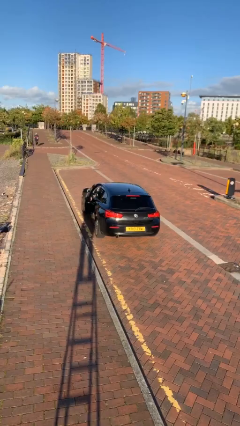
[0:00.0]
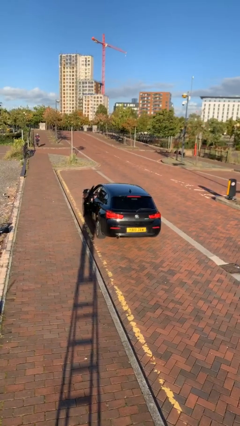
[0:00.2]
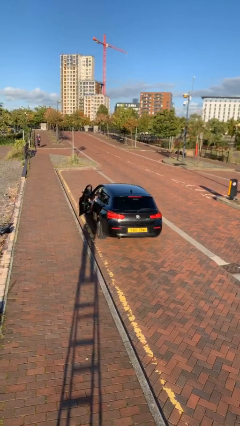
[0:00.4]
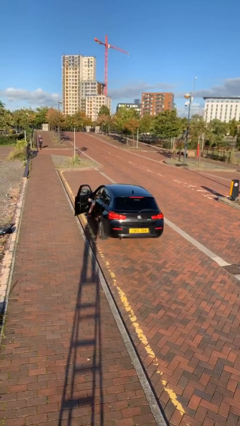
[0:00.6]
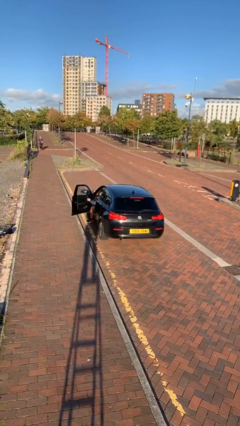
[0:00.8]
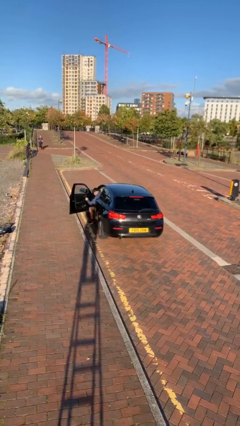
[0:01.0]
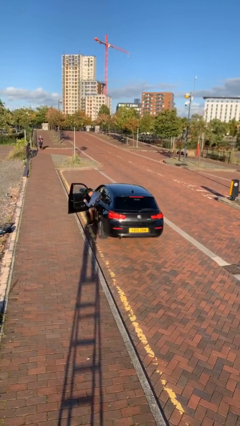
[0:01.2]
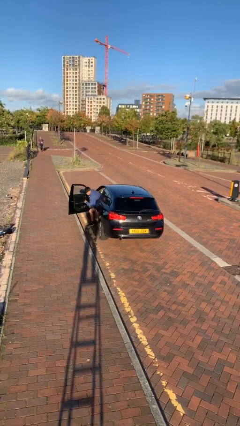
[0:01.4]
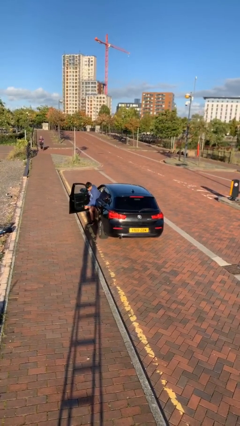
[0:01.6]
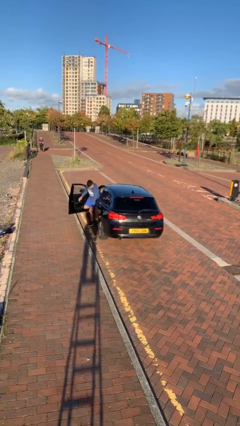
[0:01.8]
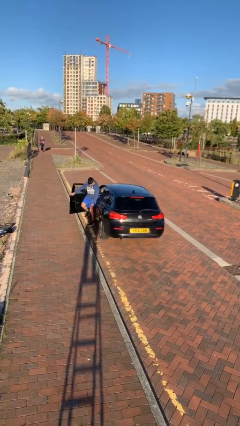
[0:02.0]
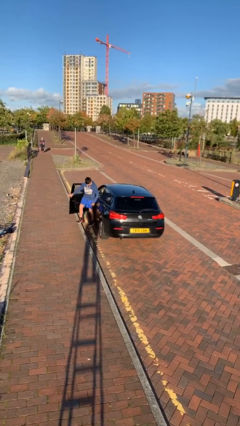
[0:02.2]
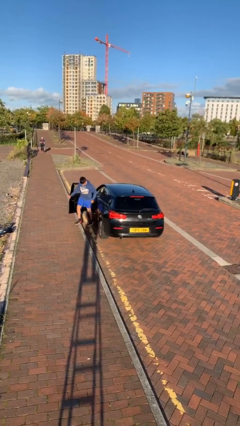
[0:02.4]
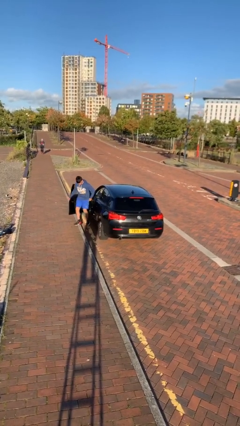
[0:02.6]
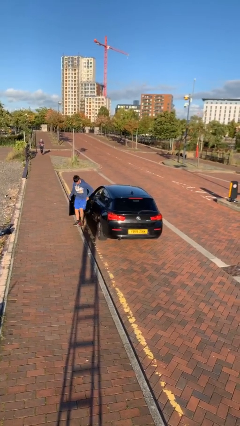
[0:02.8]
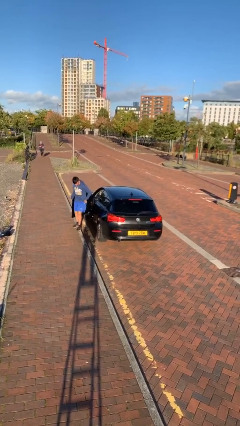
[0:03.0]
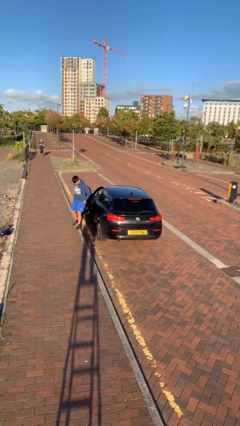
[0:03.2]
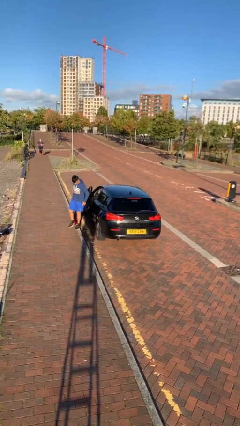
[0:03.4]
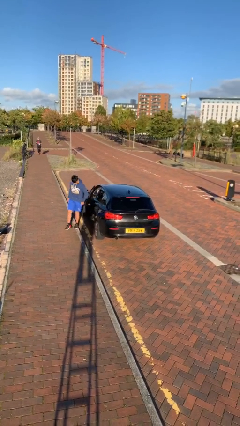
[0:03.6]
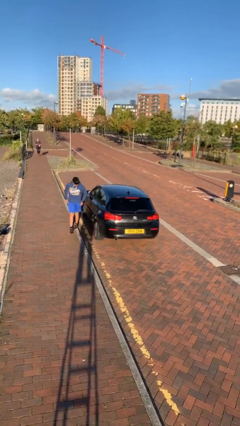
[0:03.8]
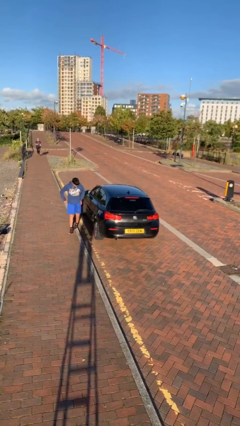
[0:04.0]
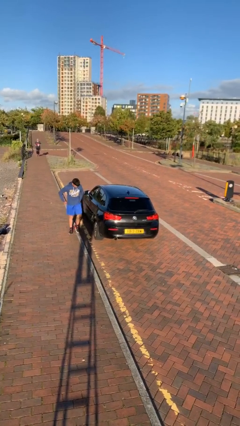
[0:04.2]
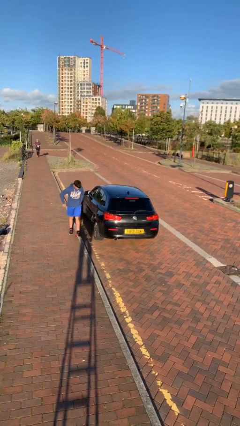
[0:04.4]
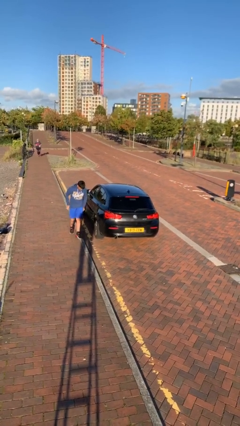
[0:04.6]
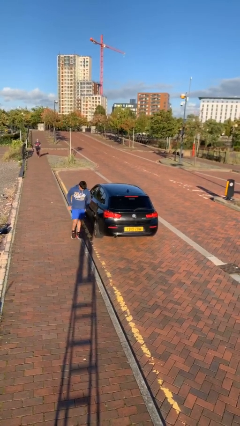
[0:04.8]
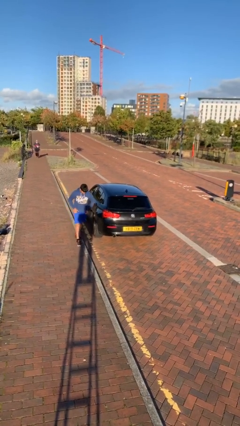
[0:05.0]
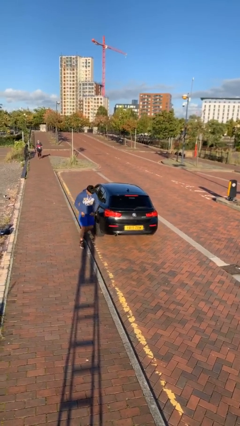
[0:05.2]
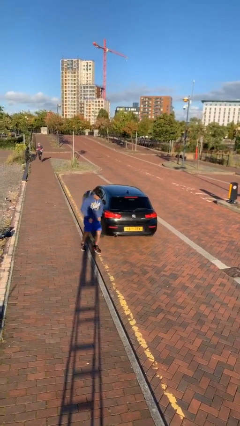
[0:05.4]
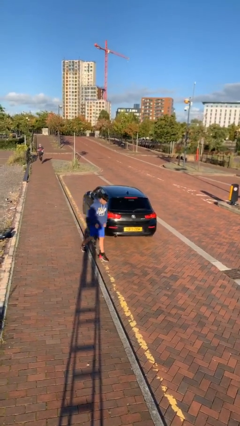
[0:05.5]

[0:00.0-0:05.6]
car drops off person

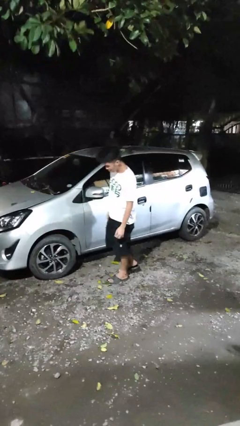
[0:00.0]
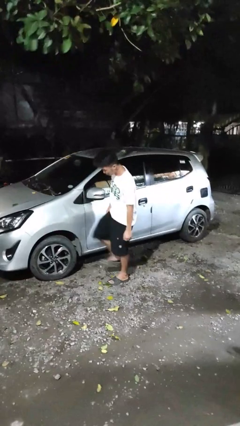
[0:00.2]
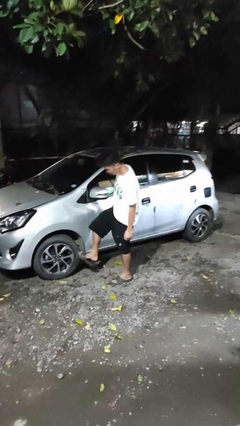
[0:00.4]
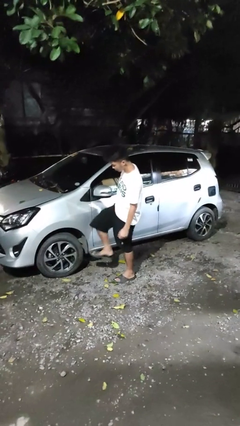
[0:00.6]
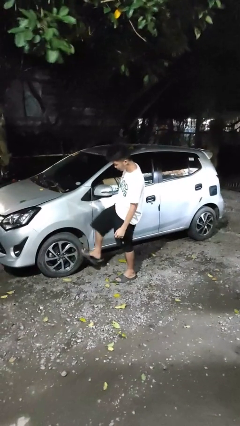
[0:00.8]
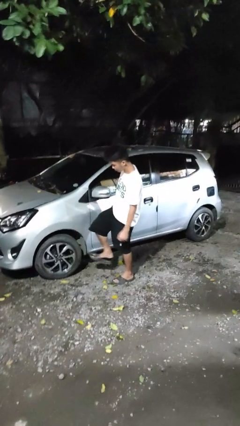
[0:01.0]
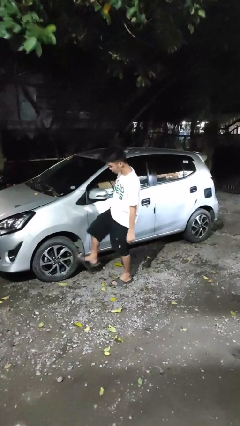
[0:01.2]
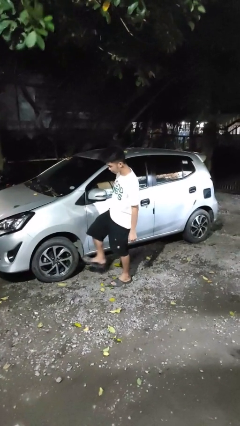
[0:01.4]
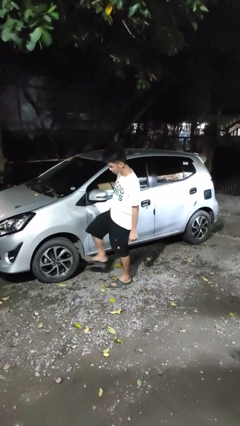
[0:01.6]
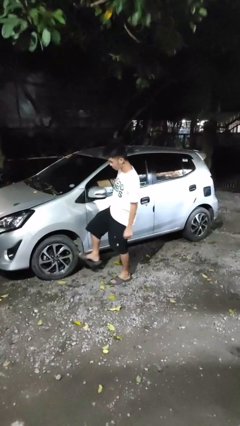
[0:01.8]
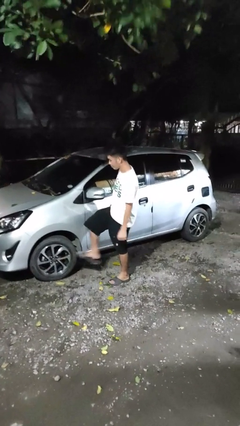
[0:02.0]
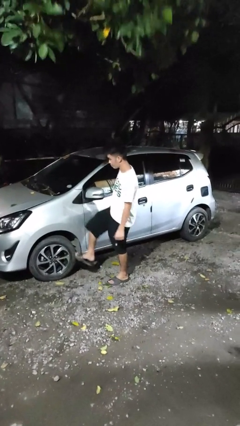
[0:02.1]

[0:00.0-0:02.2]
person kicks car tires

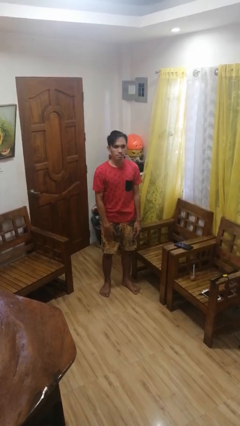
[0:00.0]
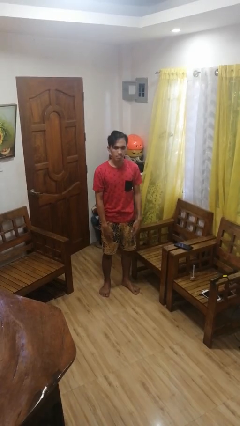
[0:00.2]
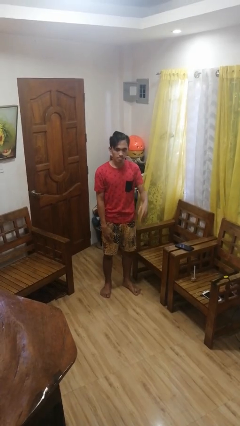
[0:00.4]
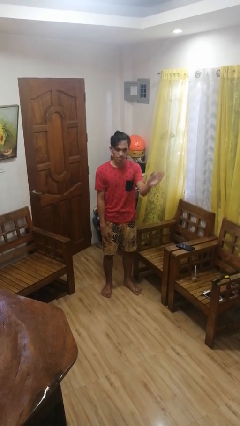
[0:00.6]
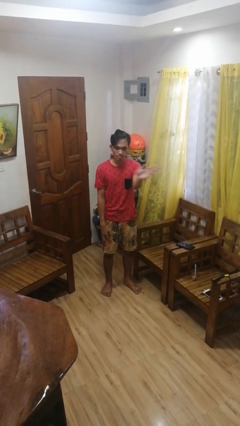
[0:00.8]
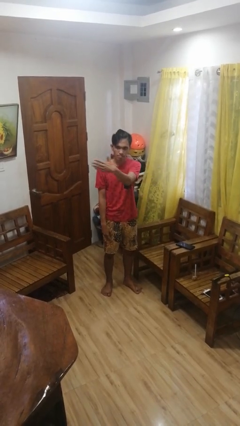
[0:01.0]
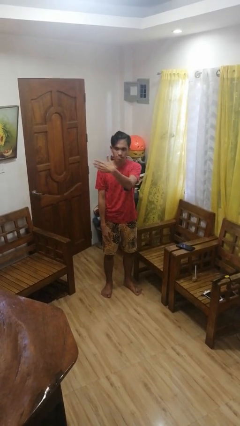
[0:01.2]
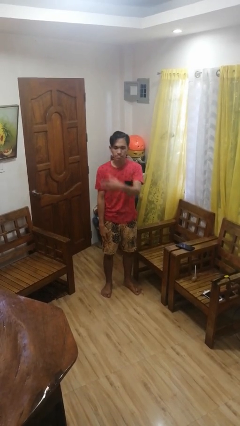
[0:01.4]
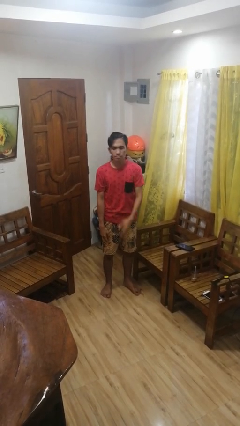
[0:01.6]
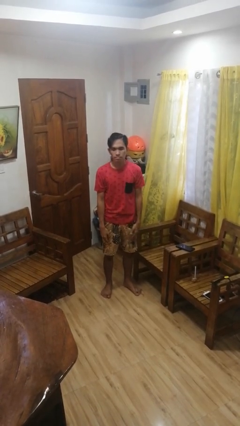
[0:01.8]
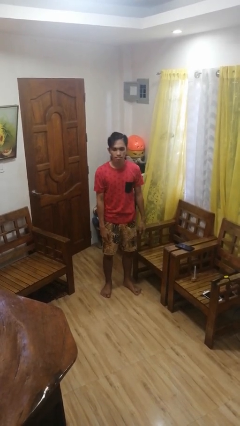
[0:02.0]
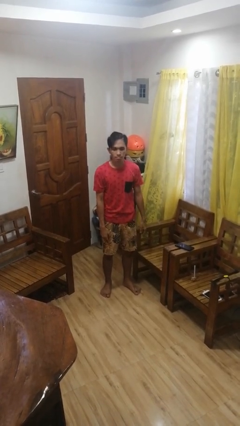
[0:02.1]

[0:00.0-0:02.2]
person gestures swipe right

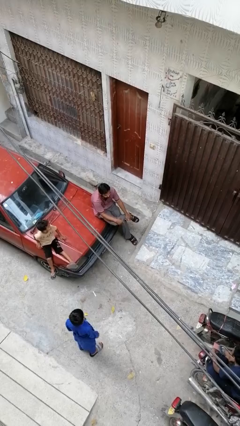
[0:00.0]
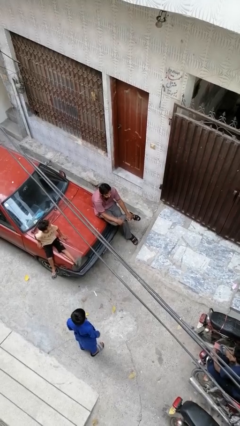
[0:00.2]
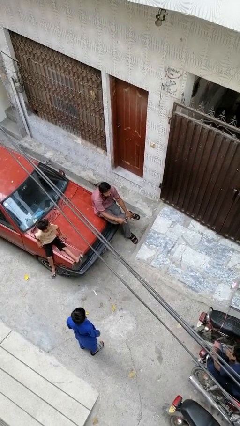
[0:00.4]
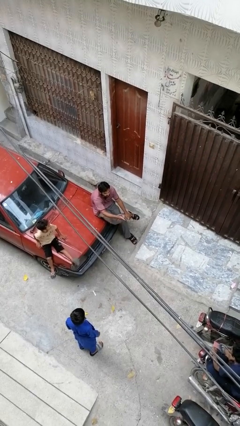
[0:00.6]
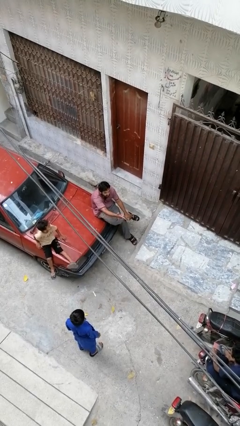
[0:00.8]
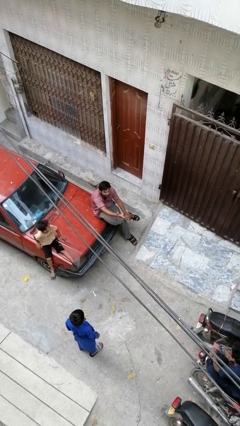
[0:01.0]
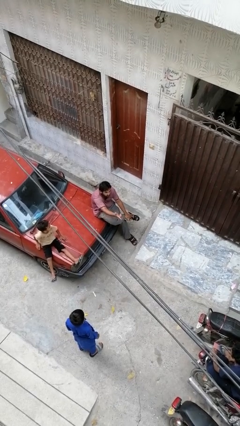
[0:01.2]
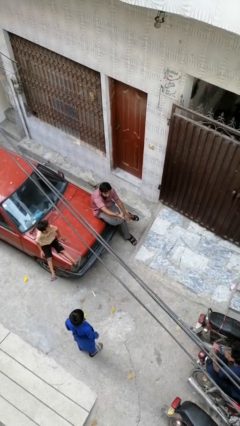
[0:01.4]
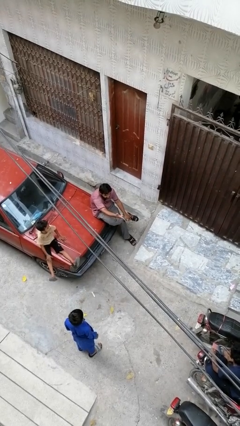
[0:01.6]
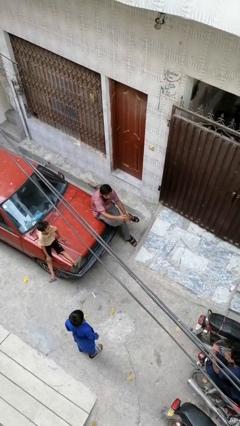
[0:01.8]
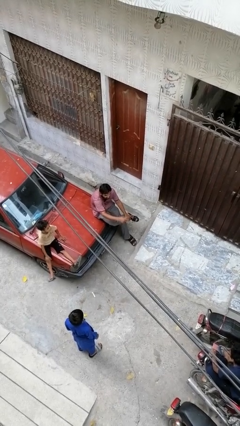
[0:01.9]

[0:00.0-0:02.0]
person points at person

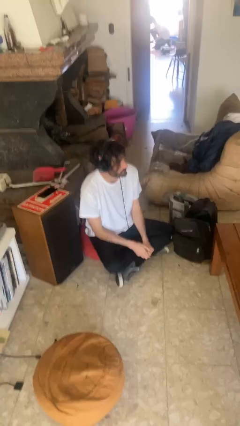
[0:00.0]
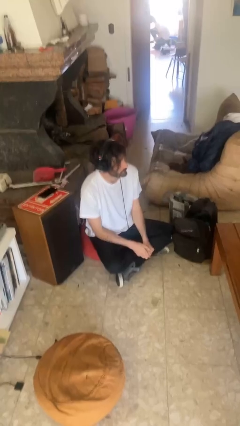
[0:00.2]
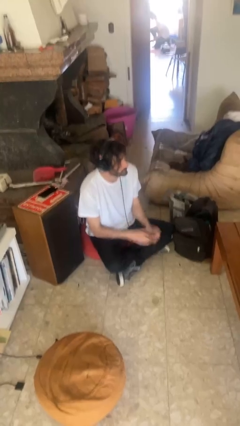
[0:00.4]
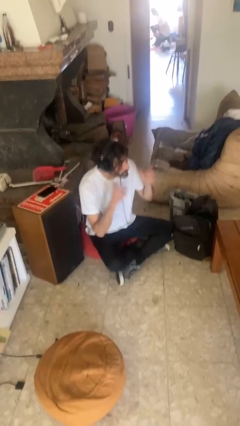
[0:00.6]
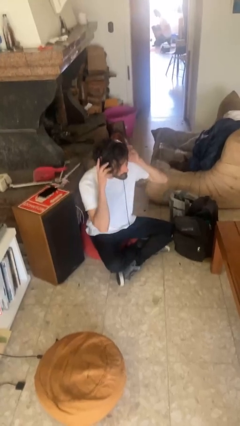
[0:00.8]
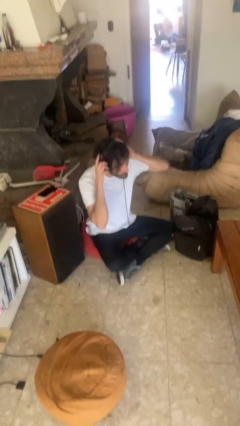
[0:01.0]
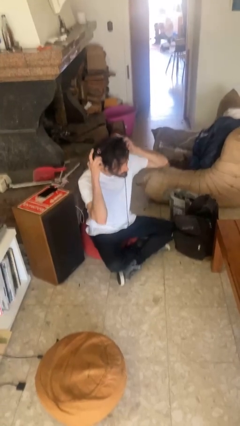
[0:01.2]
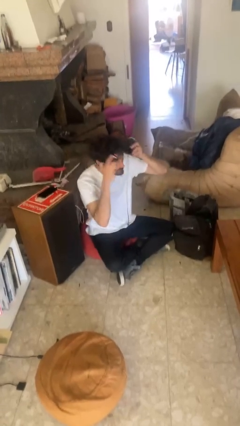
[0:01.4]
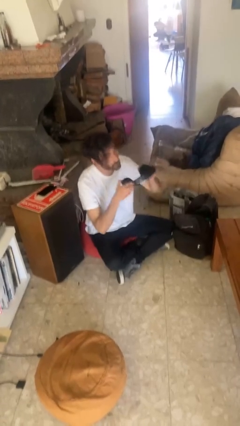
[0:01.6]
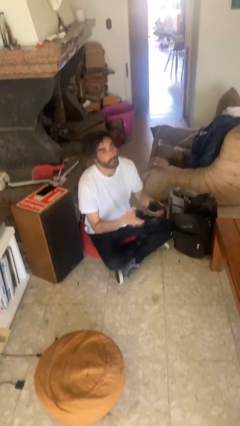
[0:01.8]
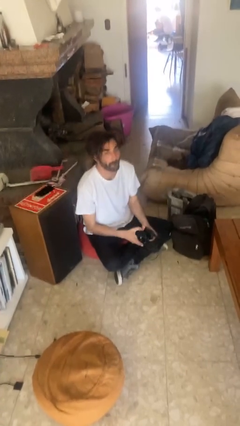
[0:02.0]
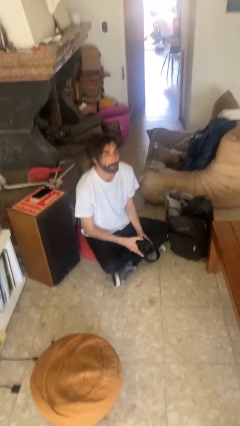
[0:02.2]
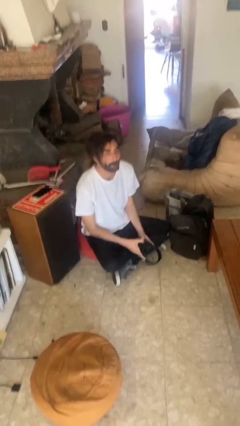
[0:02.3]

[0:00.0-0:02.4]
person takes off headphones

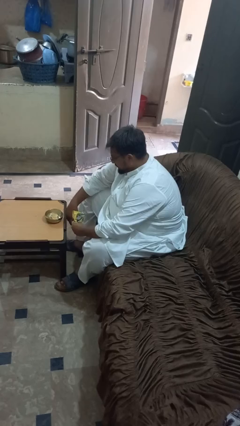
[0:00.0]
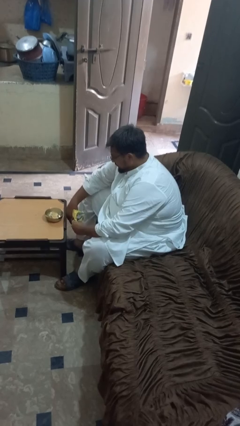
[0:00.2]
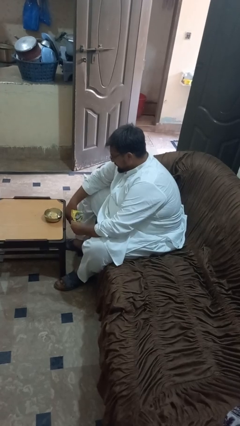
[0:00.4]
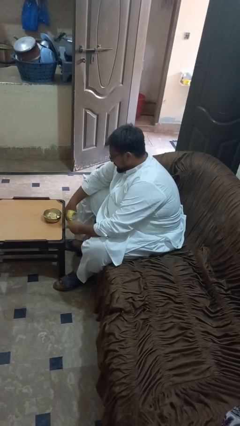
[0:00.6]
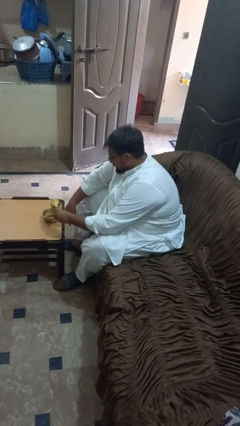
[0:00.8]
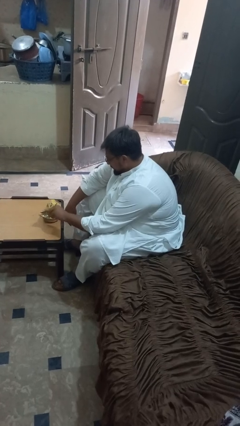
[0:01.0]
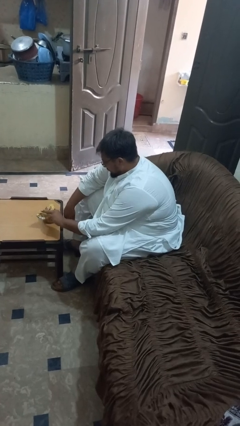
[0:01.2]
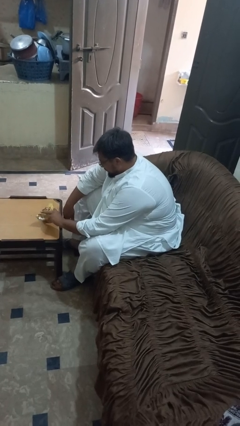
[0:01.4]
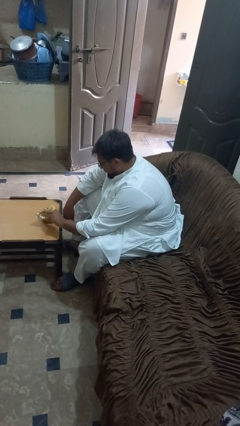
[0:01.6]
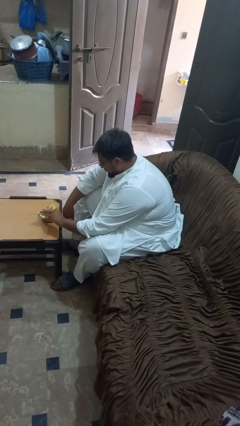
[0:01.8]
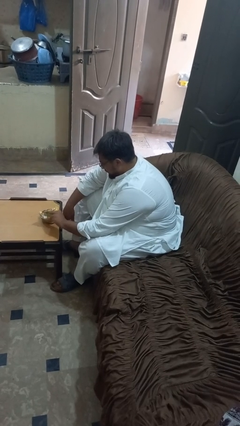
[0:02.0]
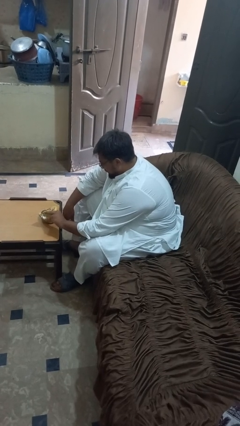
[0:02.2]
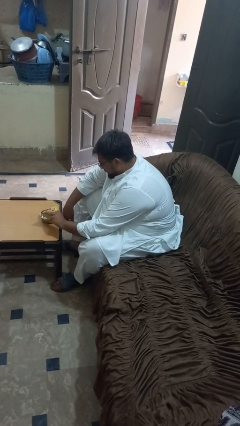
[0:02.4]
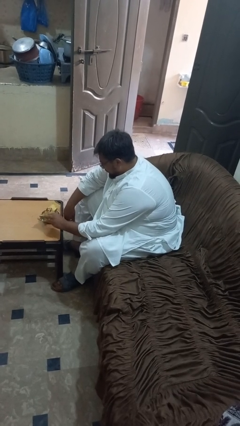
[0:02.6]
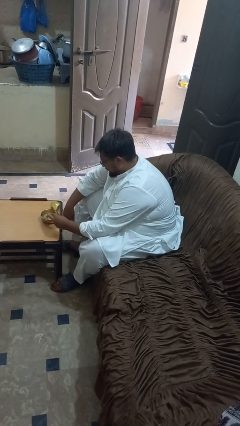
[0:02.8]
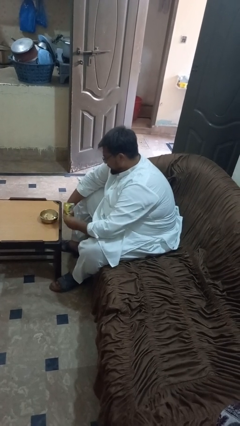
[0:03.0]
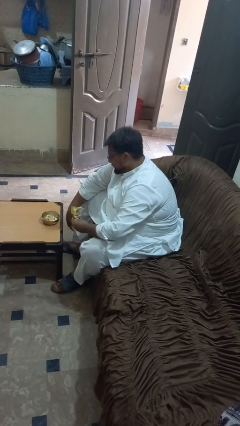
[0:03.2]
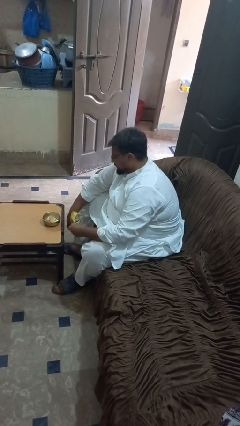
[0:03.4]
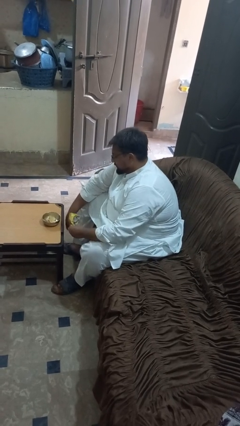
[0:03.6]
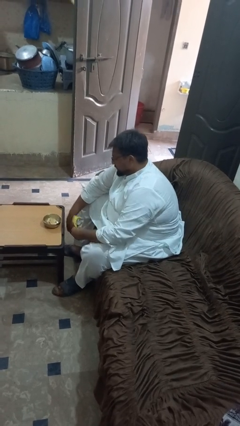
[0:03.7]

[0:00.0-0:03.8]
person pours into bowl
